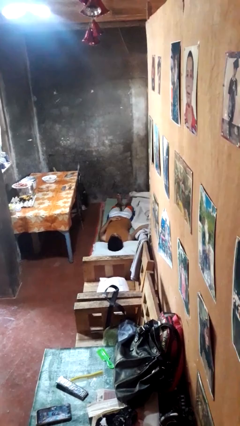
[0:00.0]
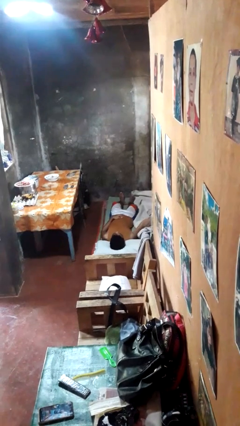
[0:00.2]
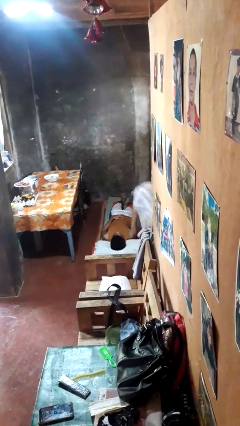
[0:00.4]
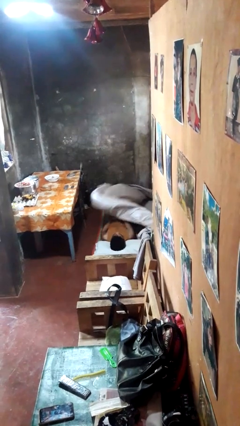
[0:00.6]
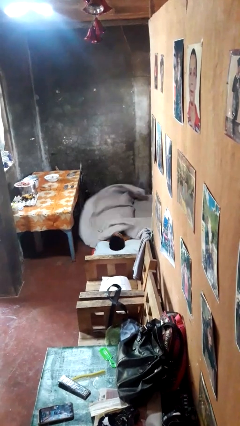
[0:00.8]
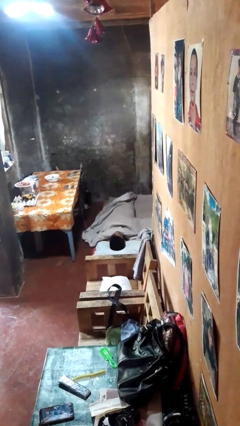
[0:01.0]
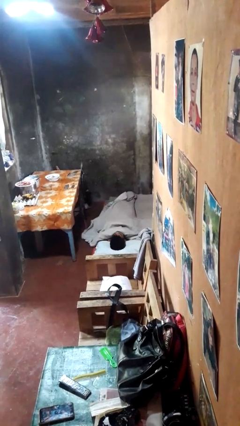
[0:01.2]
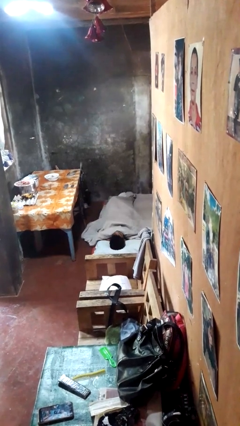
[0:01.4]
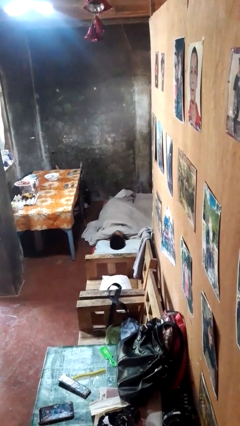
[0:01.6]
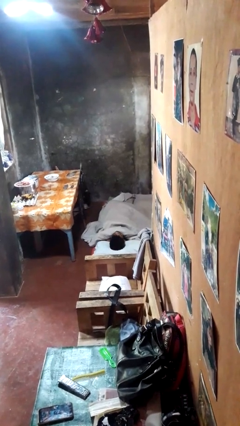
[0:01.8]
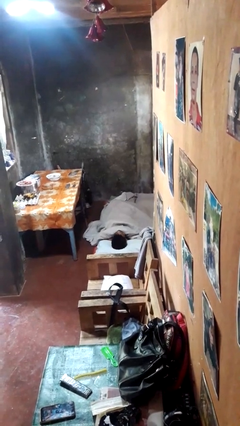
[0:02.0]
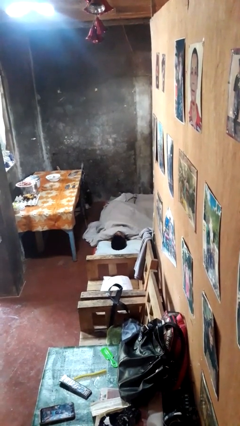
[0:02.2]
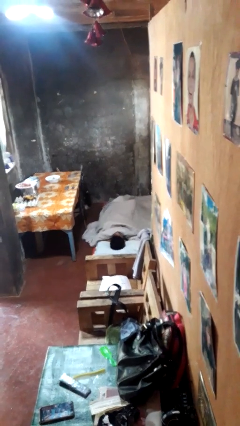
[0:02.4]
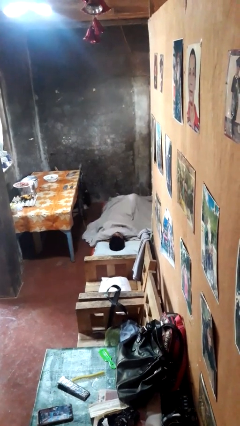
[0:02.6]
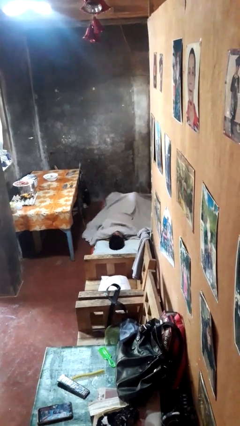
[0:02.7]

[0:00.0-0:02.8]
person covers with bedsheets

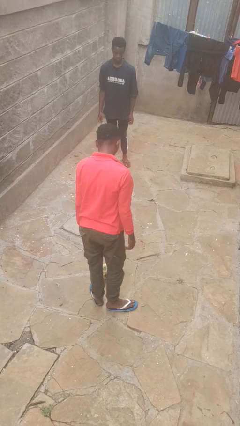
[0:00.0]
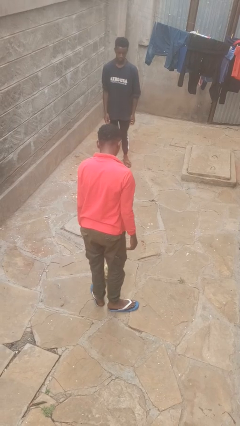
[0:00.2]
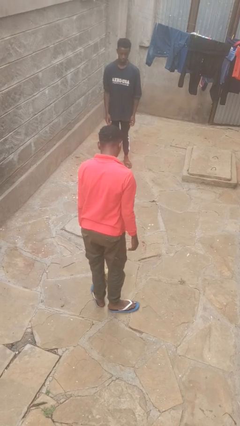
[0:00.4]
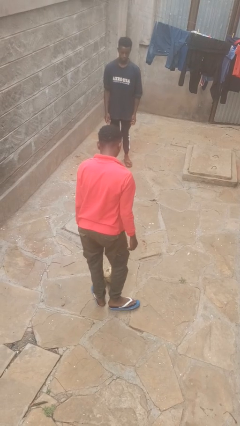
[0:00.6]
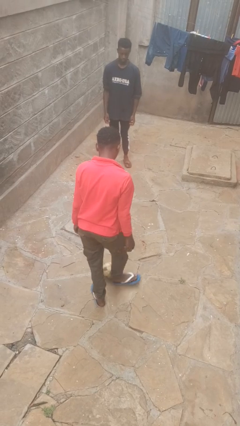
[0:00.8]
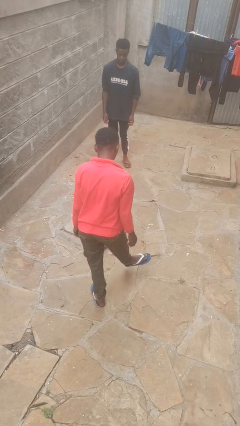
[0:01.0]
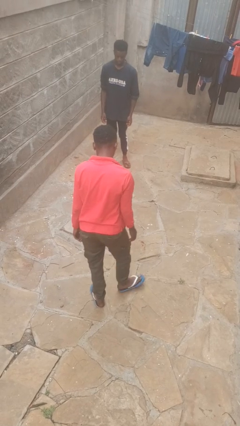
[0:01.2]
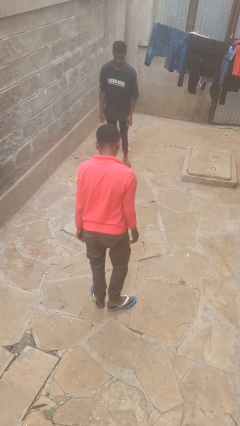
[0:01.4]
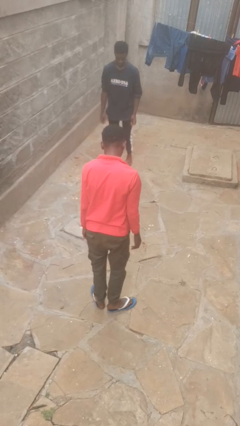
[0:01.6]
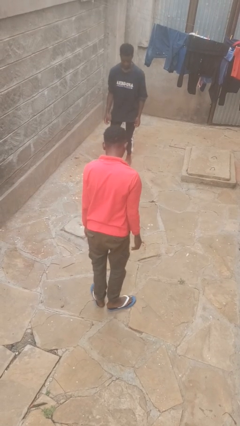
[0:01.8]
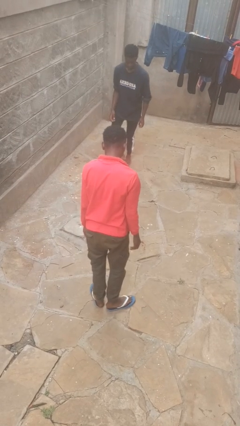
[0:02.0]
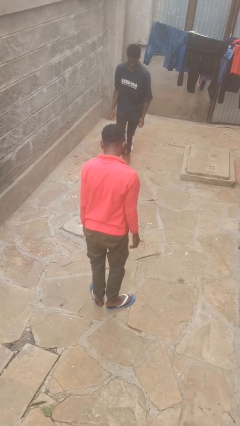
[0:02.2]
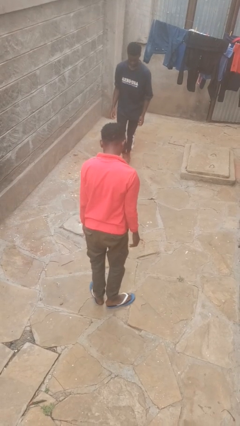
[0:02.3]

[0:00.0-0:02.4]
person kicks object to person

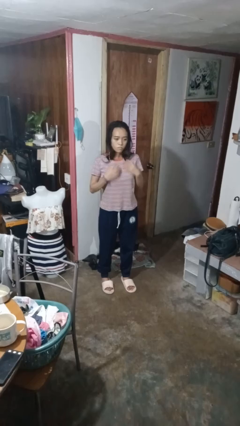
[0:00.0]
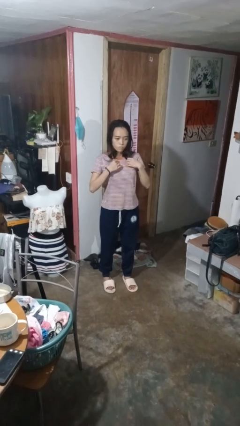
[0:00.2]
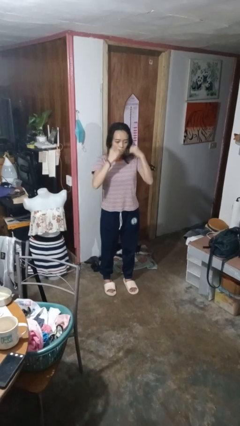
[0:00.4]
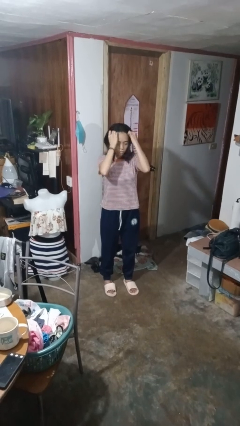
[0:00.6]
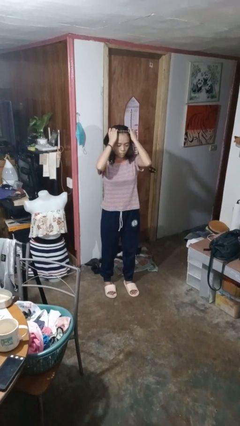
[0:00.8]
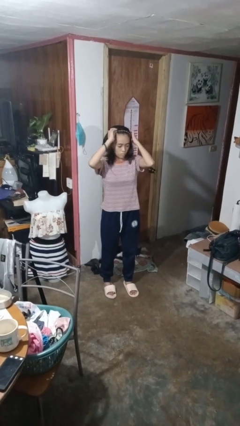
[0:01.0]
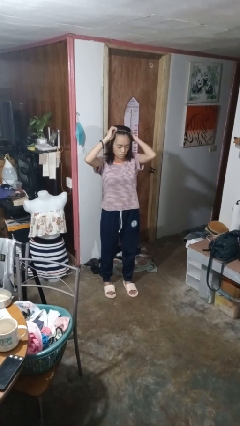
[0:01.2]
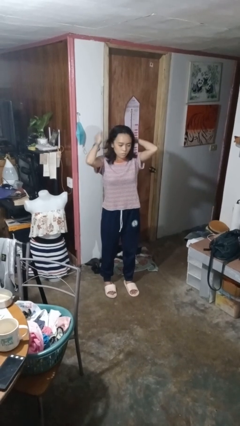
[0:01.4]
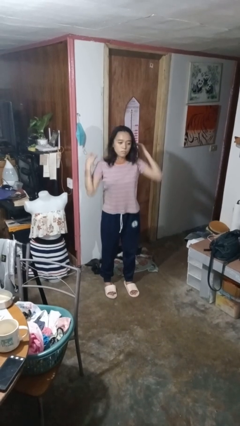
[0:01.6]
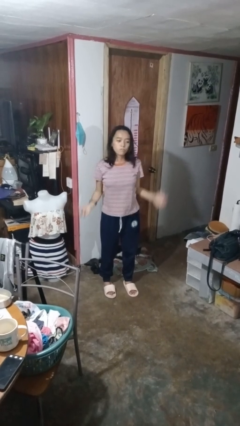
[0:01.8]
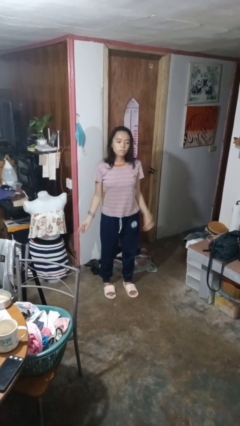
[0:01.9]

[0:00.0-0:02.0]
person takes off necklace

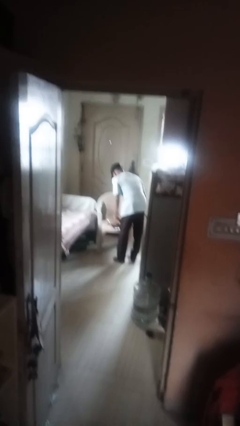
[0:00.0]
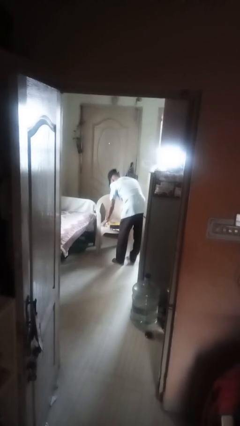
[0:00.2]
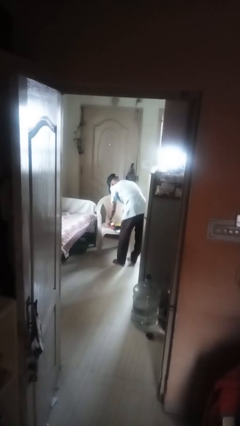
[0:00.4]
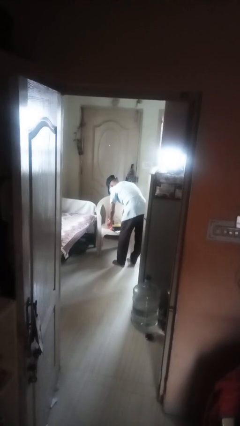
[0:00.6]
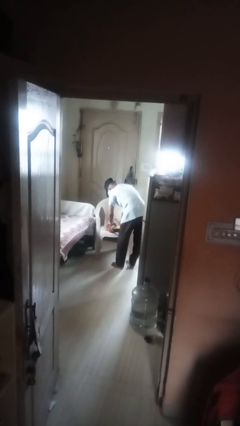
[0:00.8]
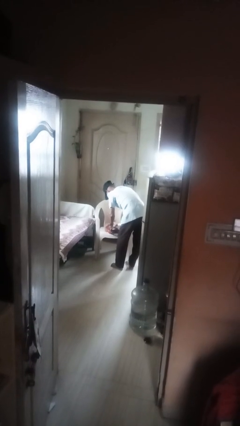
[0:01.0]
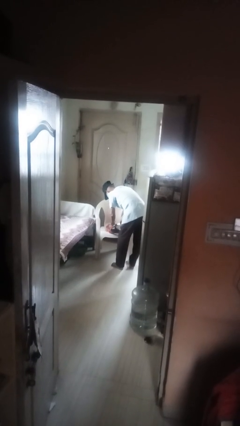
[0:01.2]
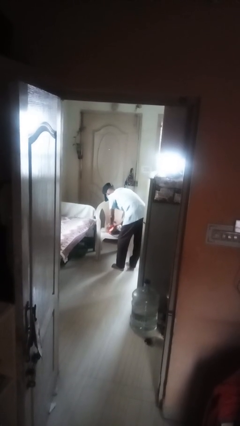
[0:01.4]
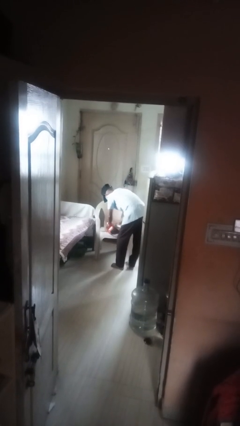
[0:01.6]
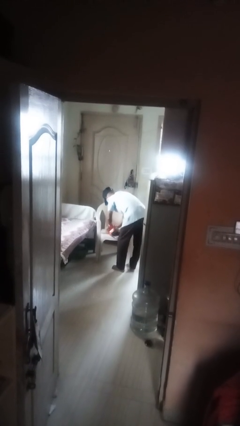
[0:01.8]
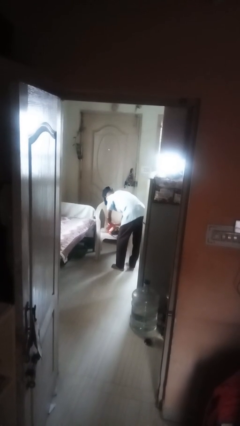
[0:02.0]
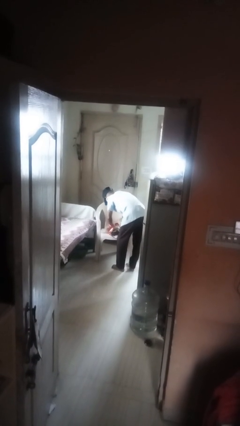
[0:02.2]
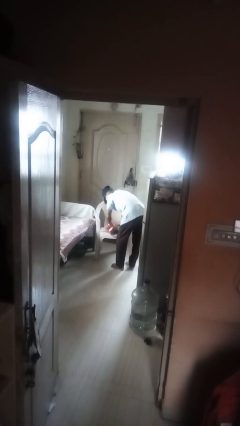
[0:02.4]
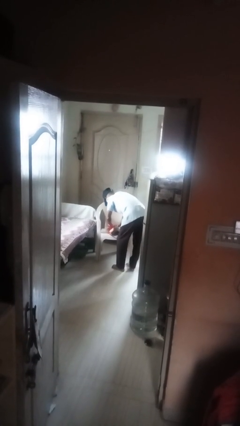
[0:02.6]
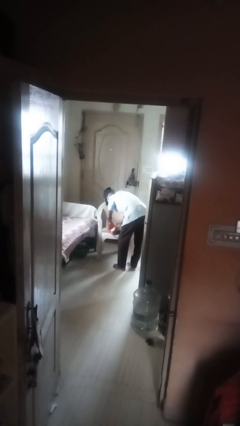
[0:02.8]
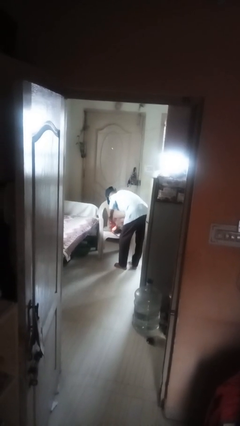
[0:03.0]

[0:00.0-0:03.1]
person wraps box

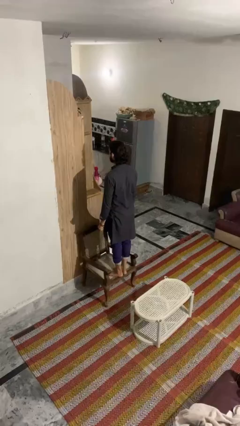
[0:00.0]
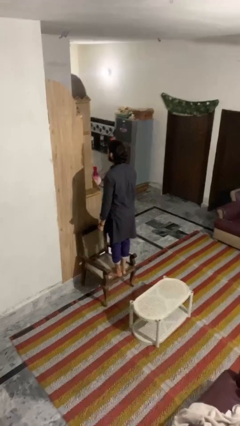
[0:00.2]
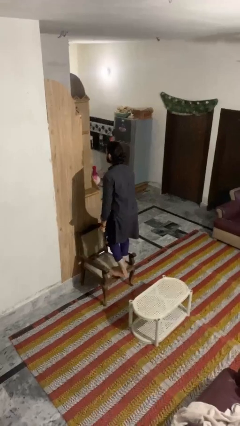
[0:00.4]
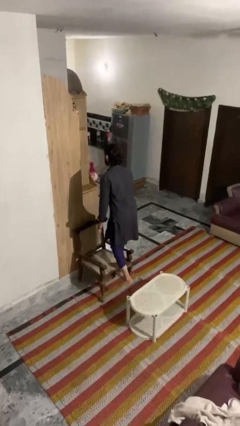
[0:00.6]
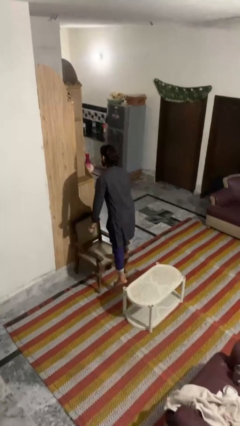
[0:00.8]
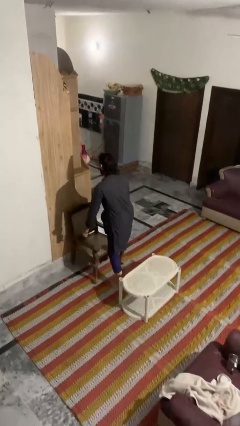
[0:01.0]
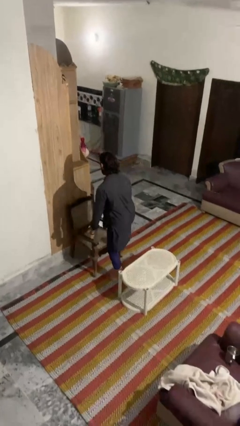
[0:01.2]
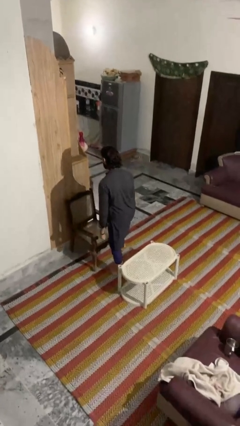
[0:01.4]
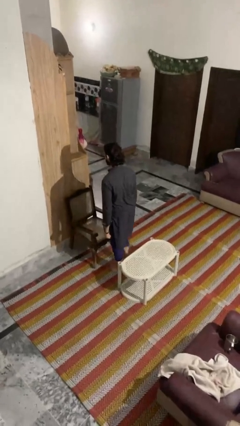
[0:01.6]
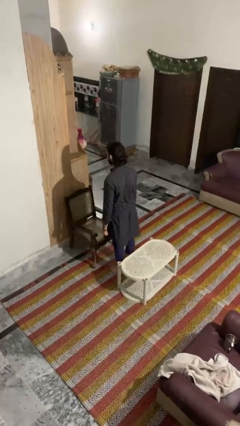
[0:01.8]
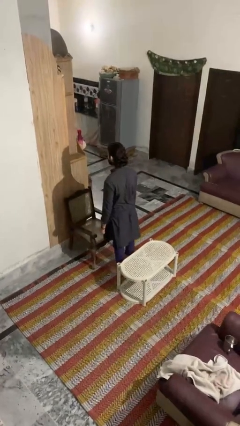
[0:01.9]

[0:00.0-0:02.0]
person climbs off chair

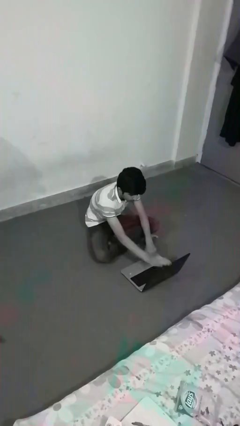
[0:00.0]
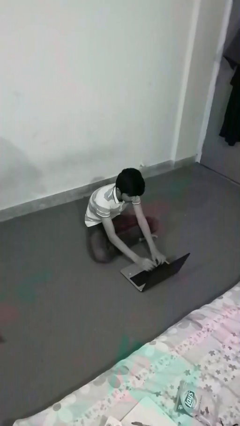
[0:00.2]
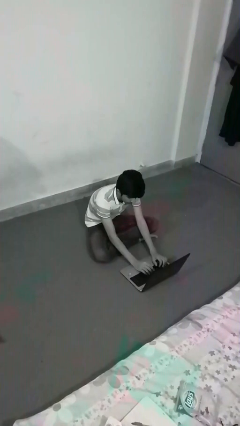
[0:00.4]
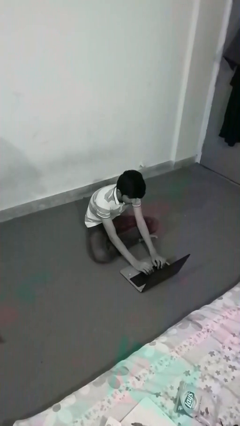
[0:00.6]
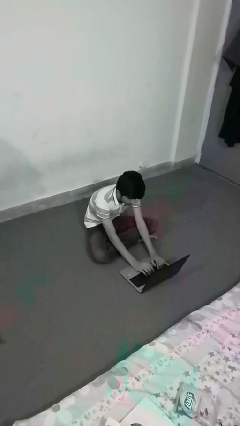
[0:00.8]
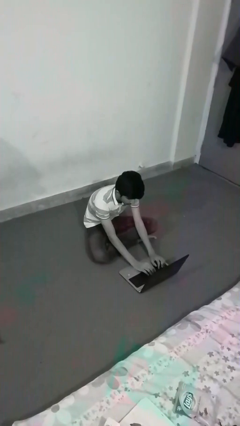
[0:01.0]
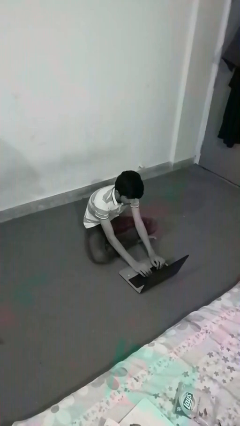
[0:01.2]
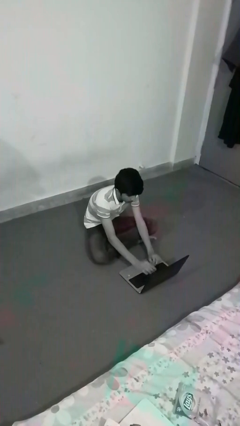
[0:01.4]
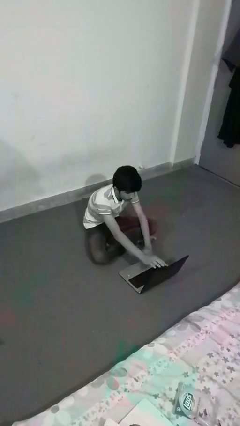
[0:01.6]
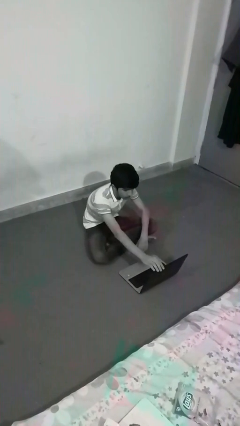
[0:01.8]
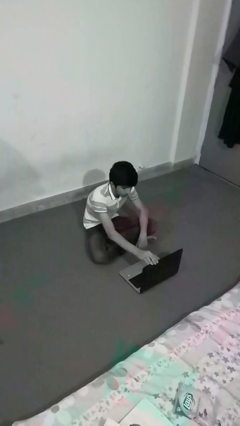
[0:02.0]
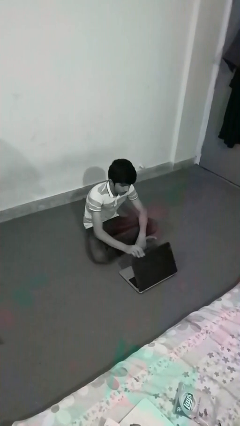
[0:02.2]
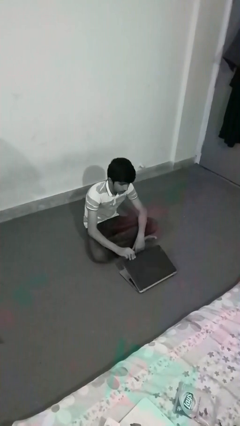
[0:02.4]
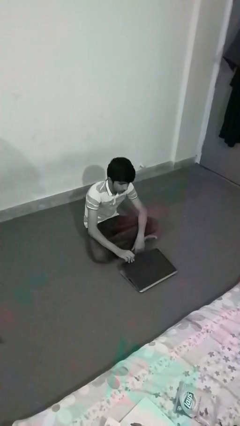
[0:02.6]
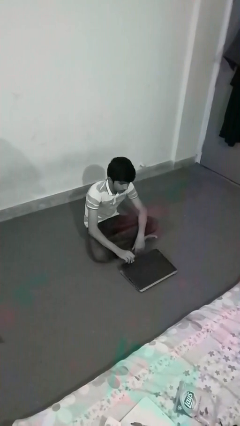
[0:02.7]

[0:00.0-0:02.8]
person interacts with laptop

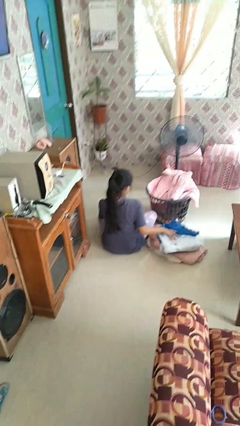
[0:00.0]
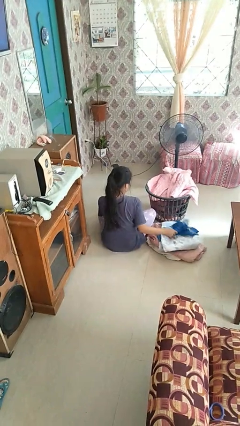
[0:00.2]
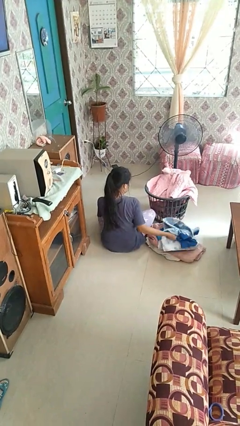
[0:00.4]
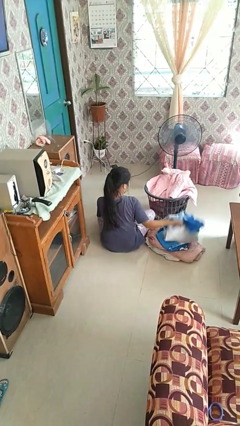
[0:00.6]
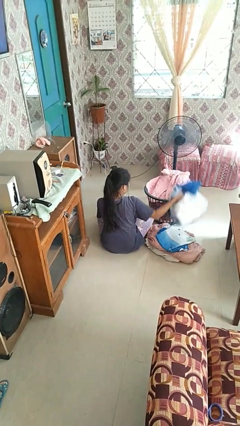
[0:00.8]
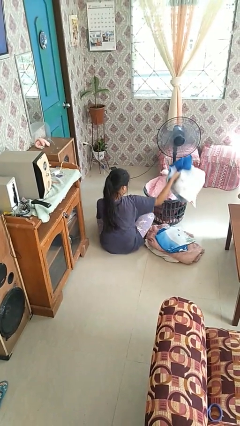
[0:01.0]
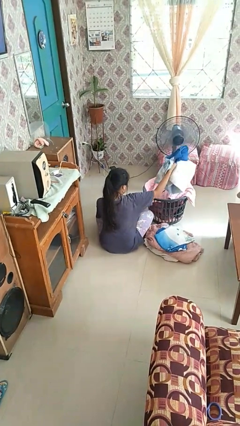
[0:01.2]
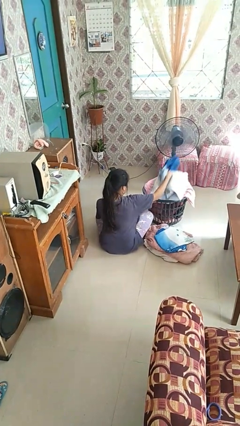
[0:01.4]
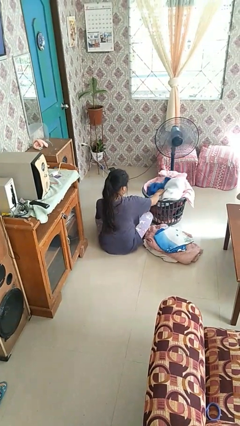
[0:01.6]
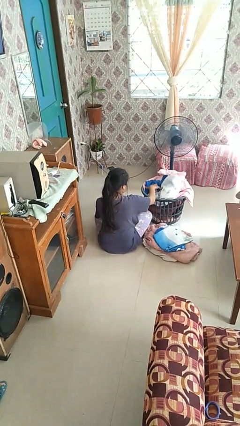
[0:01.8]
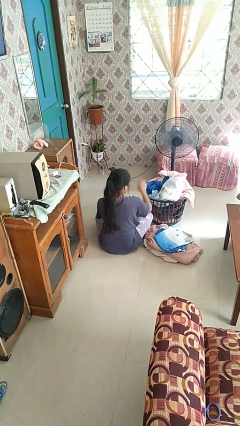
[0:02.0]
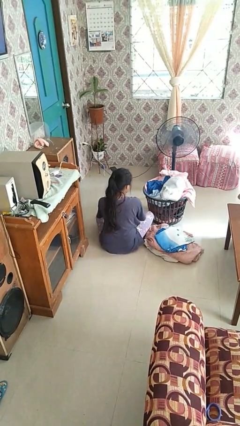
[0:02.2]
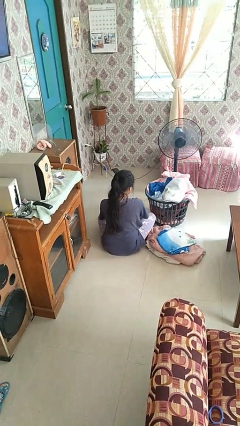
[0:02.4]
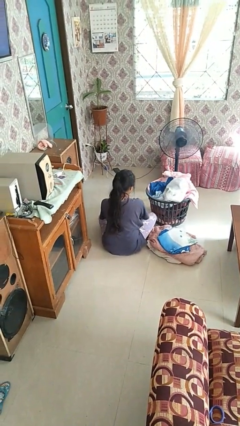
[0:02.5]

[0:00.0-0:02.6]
person puts object into basket
